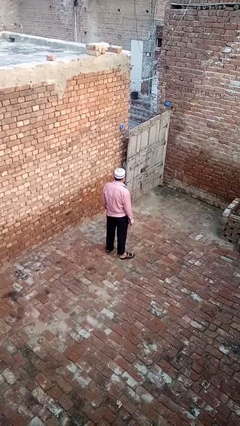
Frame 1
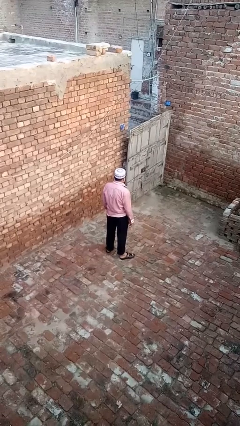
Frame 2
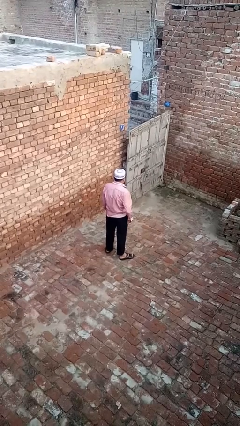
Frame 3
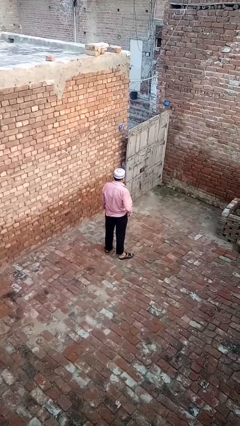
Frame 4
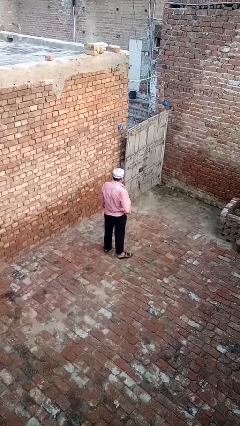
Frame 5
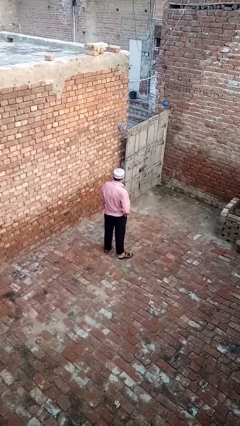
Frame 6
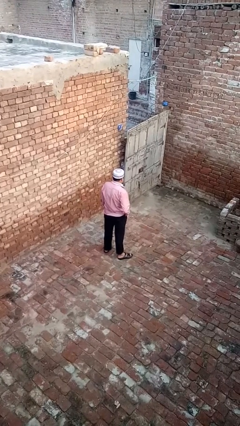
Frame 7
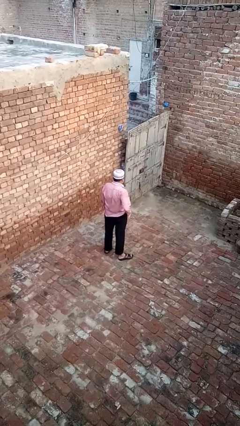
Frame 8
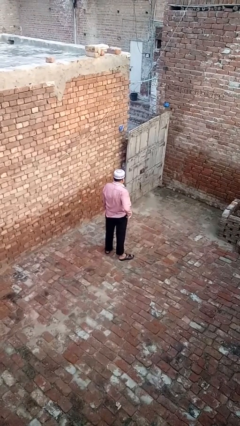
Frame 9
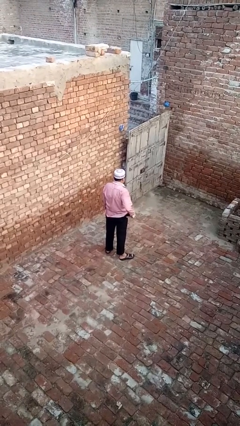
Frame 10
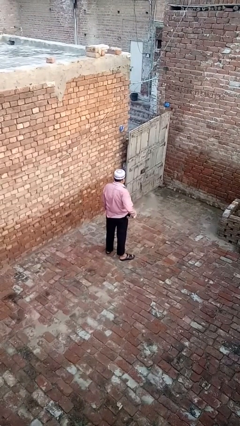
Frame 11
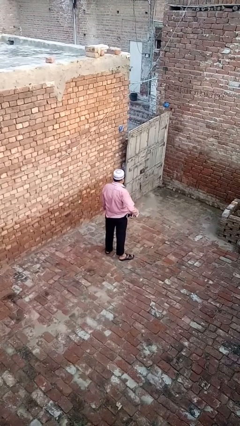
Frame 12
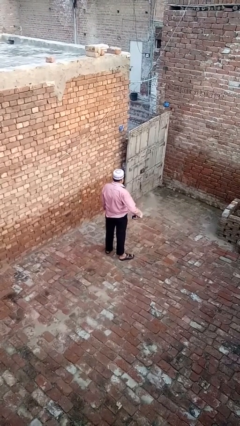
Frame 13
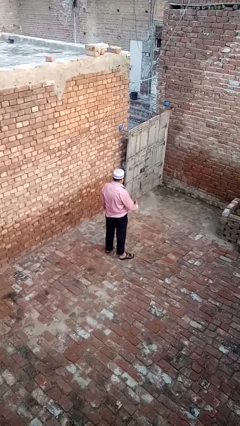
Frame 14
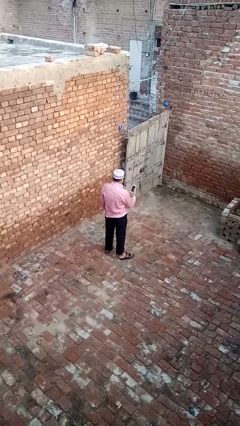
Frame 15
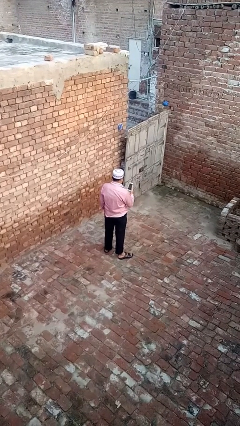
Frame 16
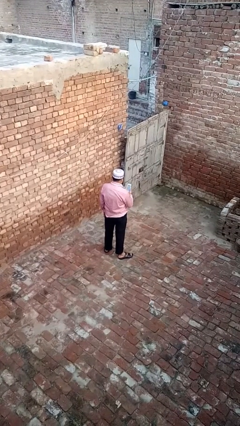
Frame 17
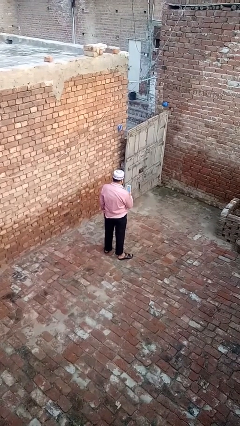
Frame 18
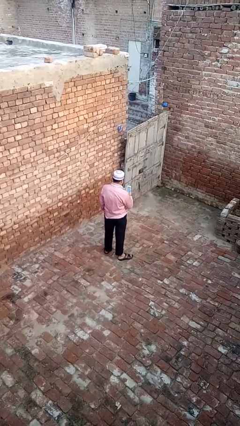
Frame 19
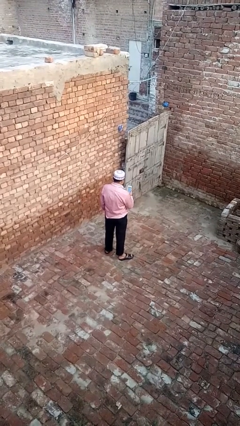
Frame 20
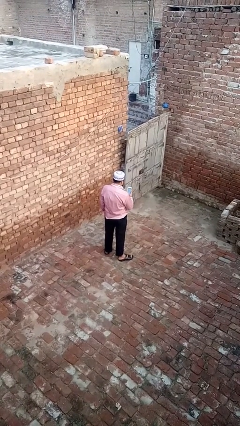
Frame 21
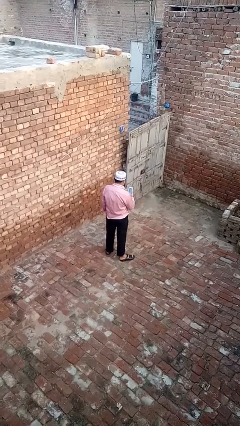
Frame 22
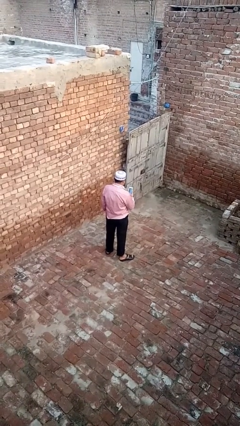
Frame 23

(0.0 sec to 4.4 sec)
person takes phone from pocket

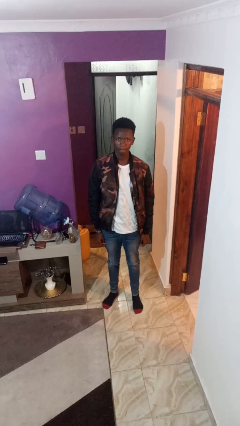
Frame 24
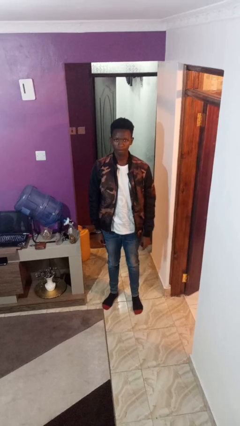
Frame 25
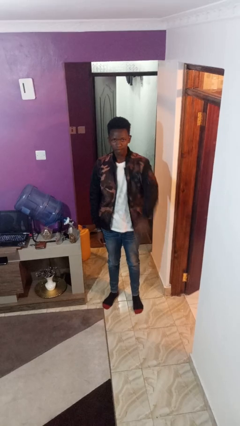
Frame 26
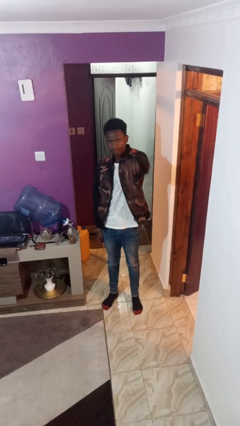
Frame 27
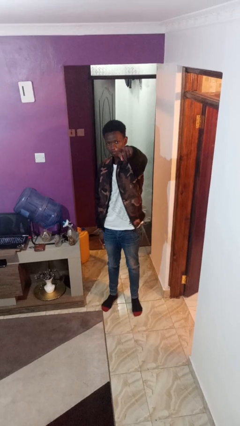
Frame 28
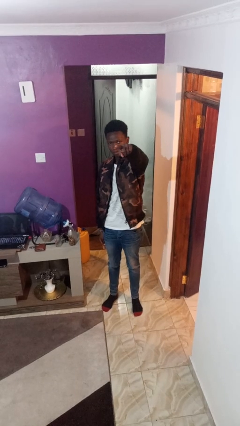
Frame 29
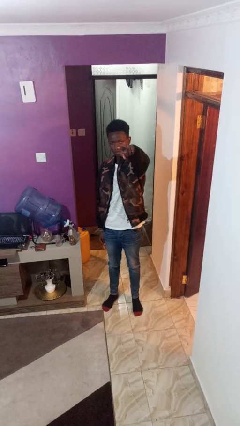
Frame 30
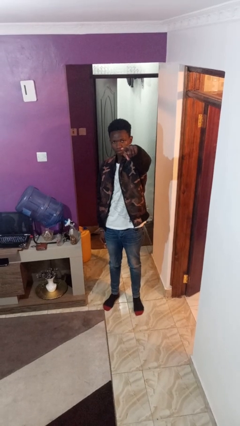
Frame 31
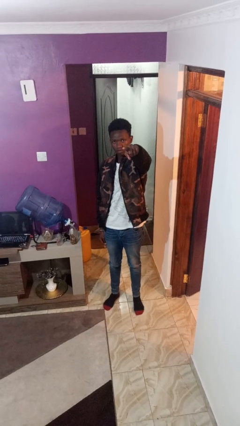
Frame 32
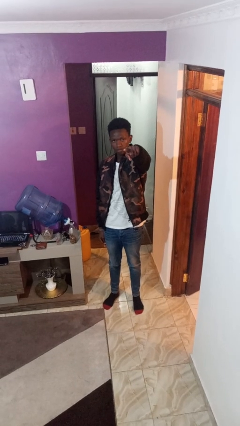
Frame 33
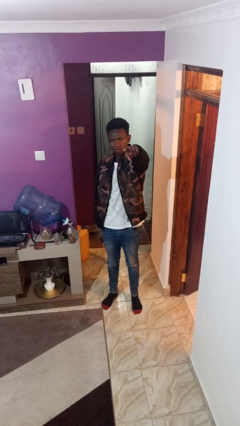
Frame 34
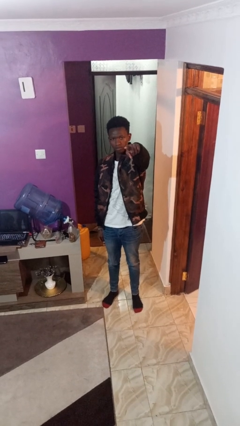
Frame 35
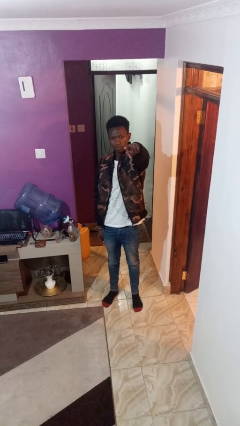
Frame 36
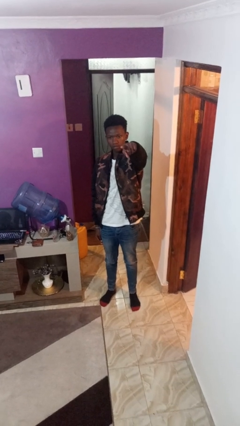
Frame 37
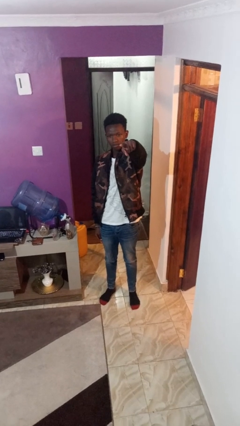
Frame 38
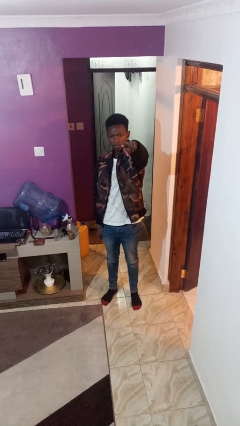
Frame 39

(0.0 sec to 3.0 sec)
person points at person

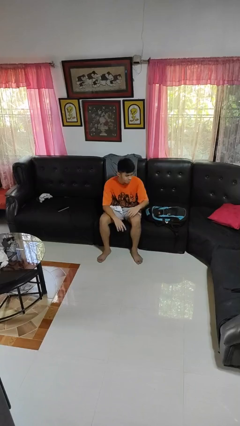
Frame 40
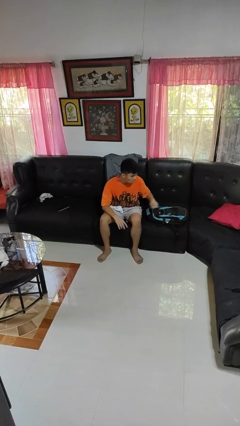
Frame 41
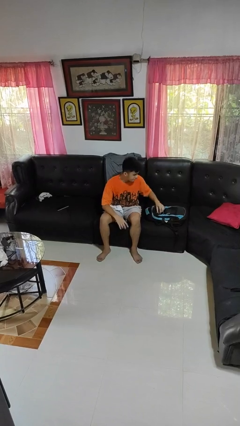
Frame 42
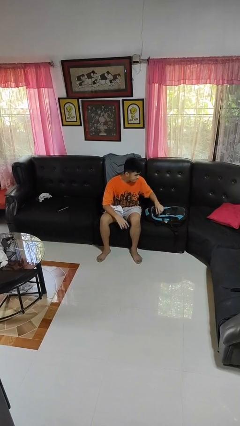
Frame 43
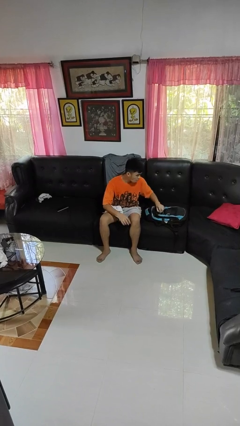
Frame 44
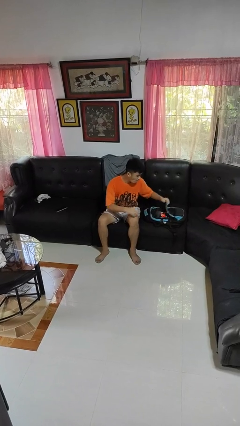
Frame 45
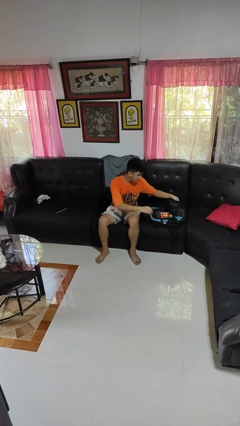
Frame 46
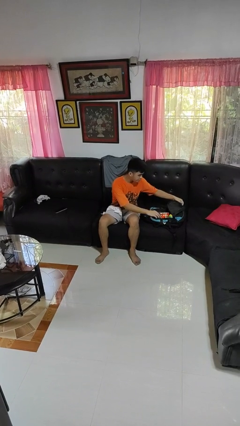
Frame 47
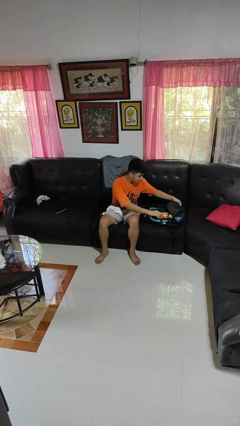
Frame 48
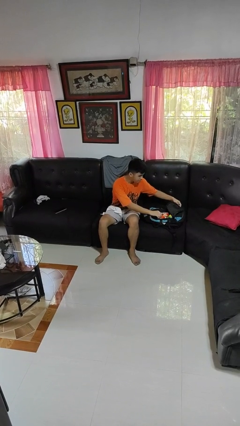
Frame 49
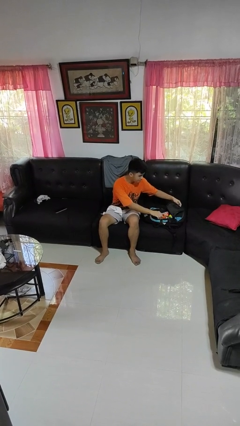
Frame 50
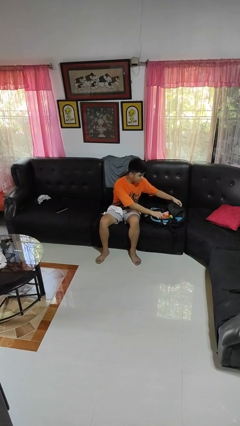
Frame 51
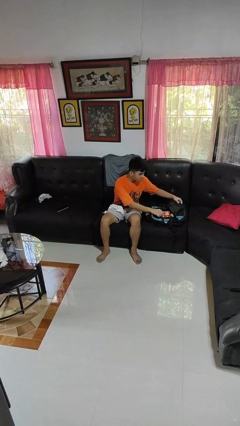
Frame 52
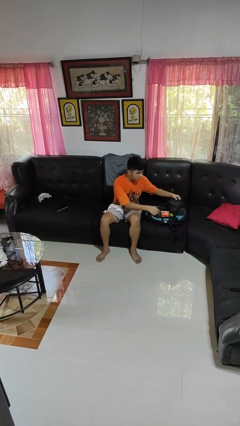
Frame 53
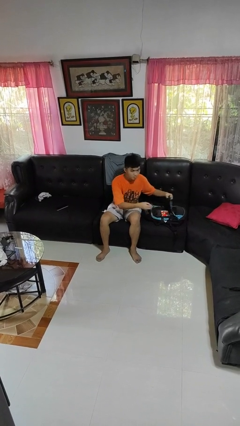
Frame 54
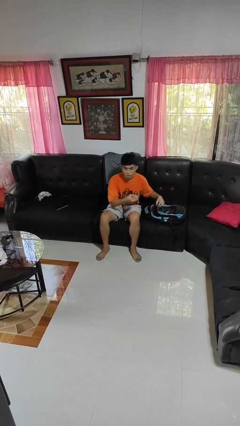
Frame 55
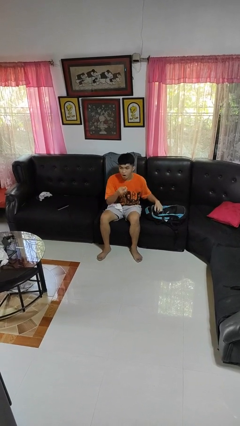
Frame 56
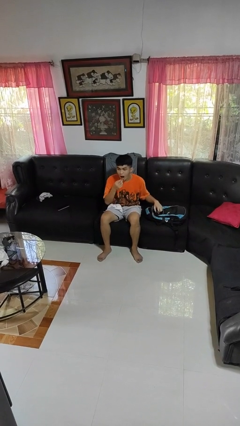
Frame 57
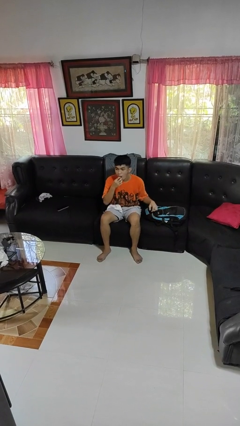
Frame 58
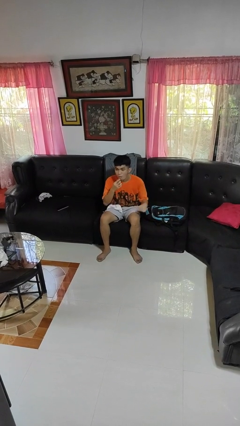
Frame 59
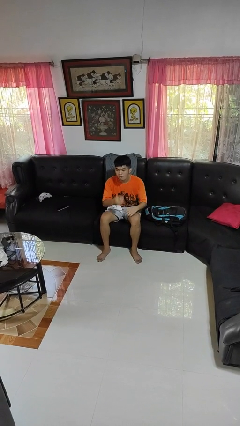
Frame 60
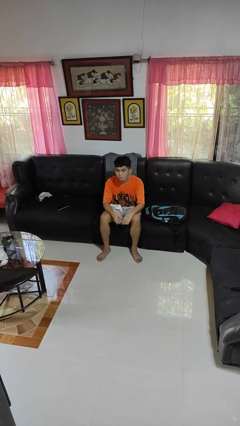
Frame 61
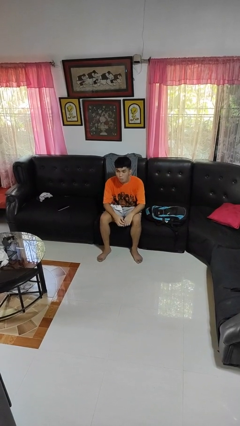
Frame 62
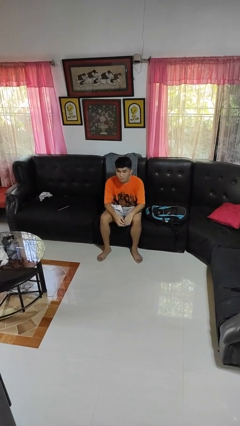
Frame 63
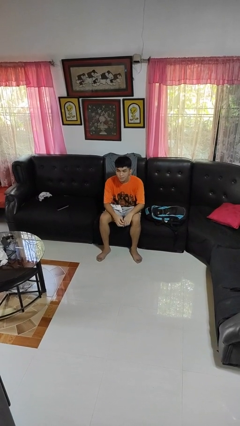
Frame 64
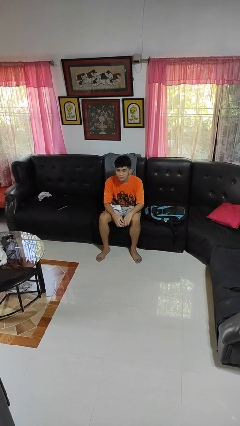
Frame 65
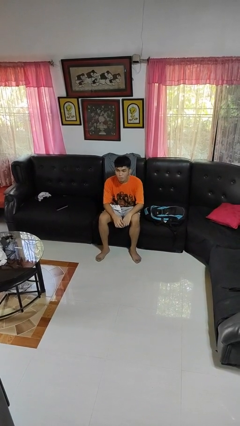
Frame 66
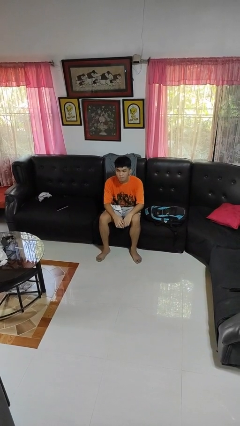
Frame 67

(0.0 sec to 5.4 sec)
person eats snack from bag

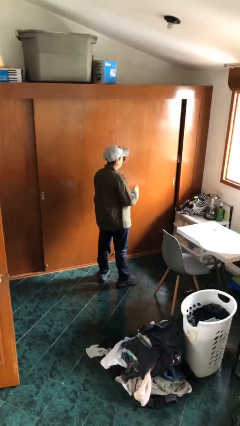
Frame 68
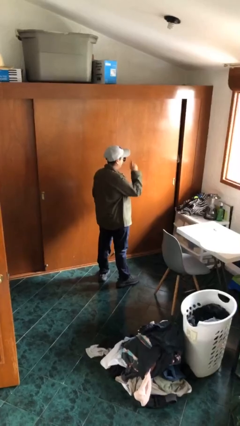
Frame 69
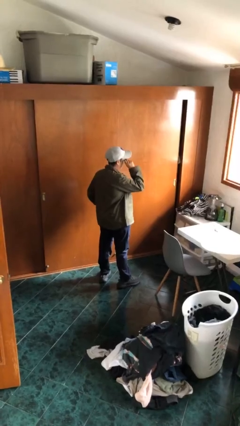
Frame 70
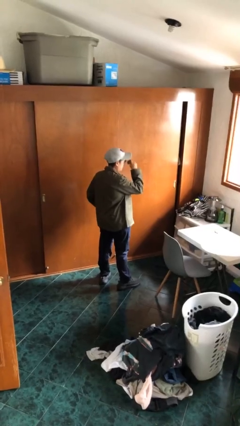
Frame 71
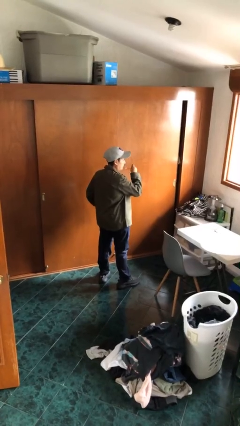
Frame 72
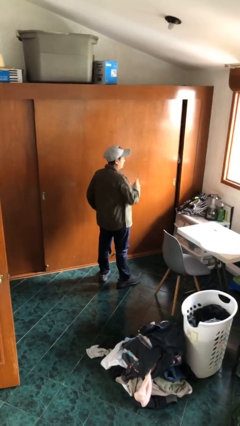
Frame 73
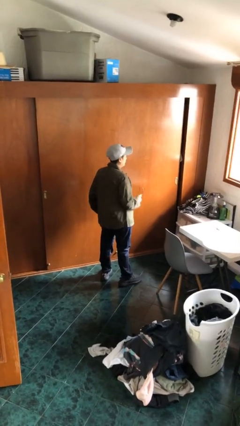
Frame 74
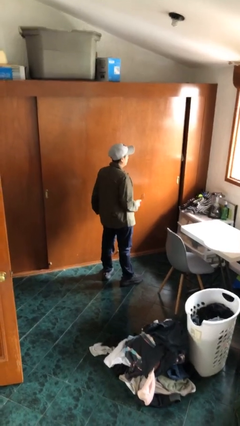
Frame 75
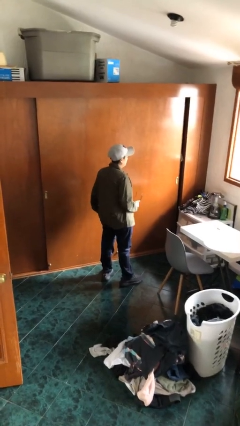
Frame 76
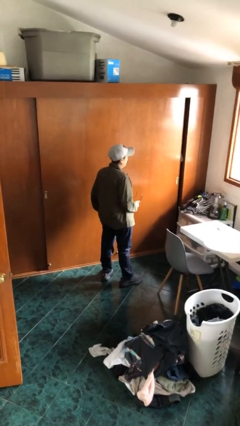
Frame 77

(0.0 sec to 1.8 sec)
person takes off sunglasses

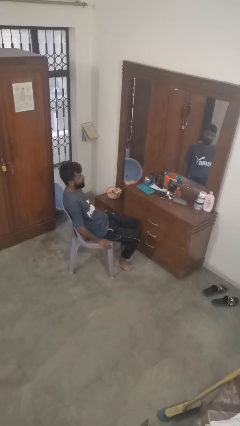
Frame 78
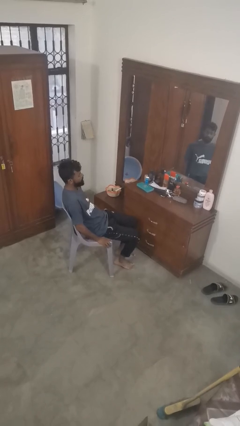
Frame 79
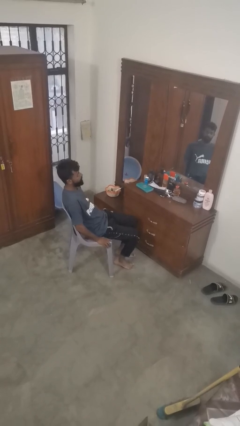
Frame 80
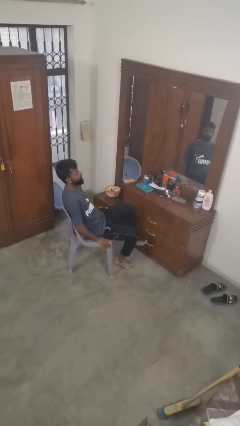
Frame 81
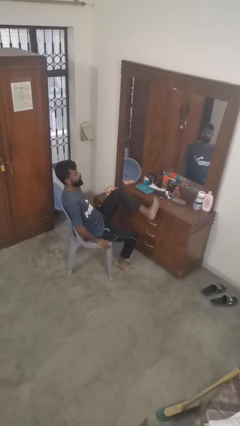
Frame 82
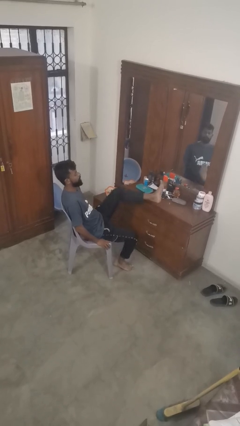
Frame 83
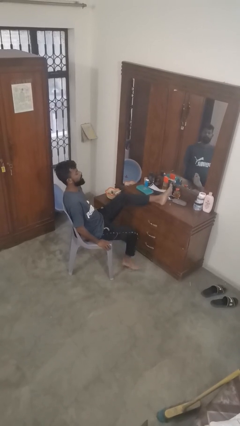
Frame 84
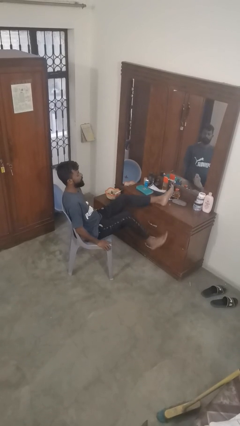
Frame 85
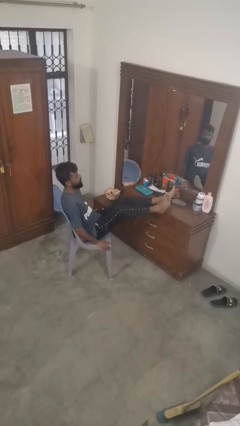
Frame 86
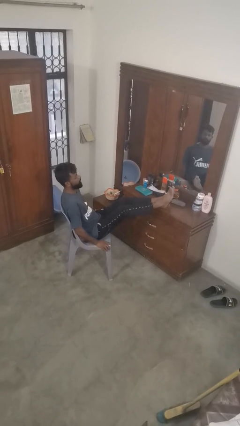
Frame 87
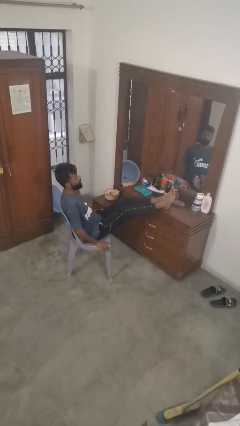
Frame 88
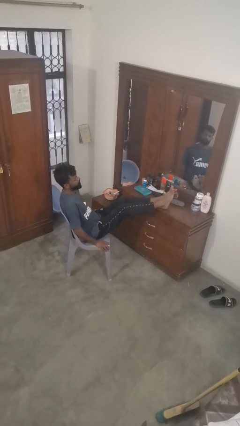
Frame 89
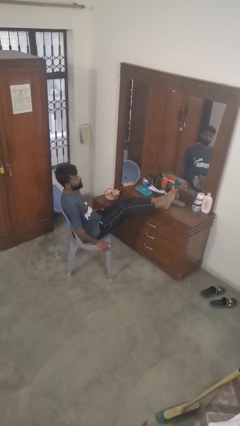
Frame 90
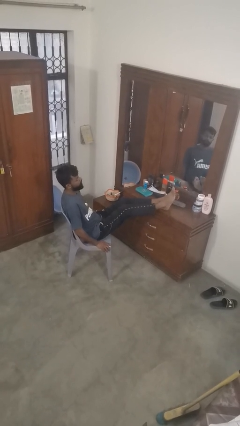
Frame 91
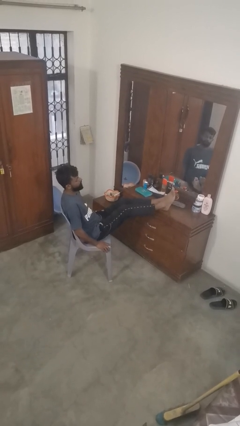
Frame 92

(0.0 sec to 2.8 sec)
person puts feet up

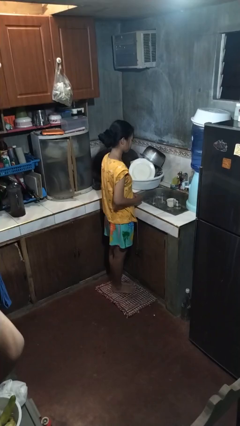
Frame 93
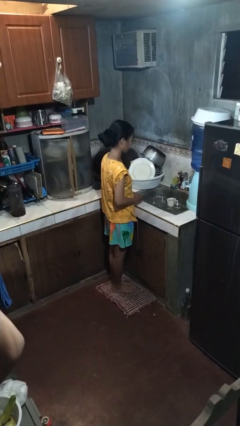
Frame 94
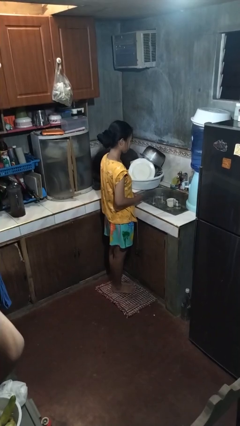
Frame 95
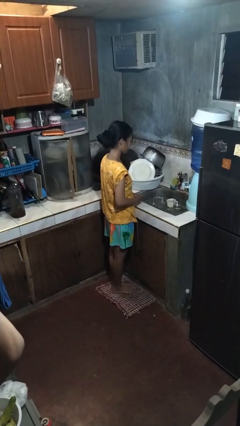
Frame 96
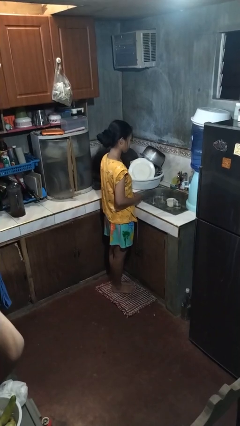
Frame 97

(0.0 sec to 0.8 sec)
person turns off faucet
